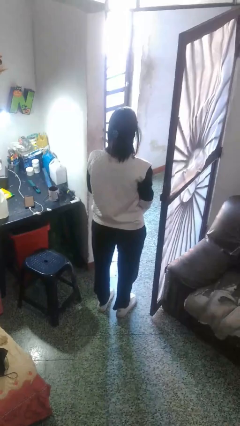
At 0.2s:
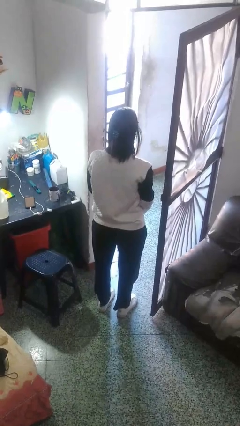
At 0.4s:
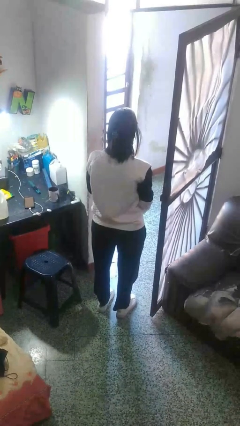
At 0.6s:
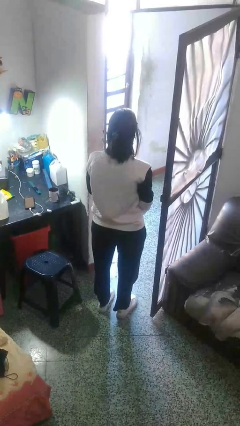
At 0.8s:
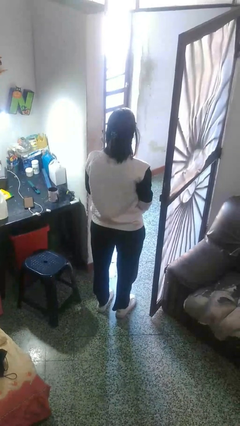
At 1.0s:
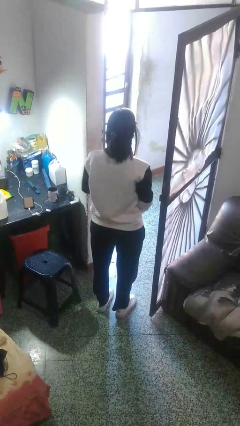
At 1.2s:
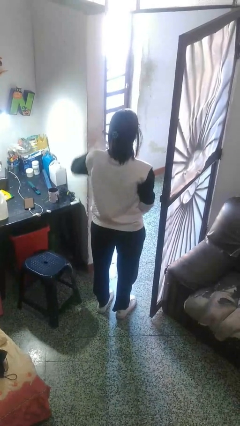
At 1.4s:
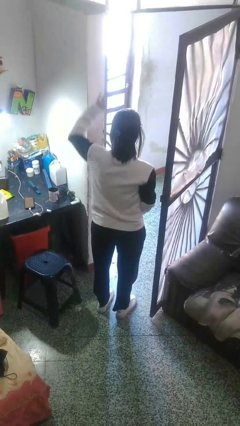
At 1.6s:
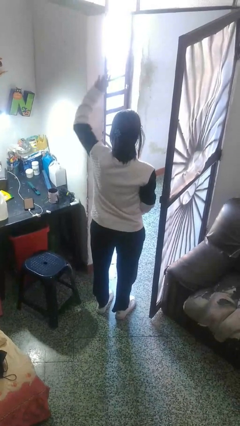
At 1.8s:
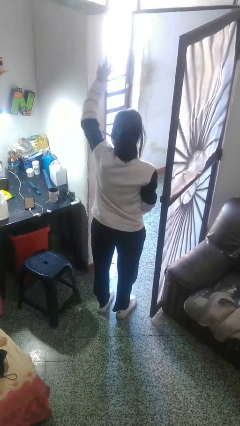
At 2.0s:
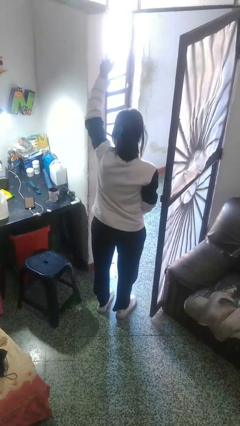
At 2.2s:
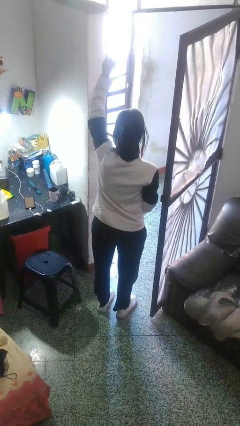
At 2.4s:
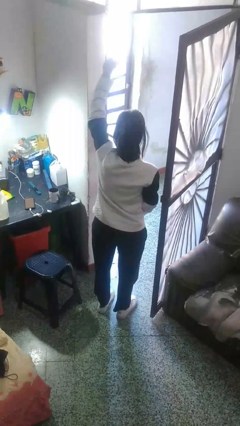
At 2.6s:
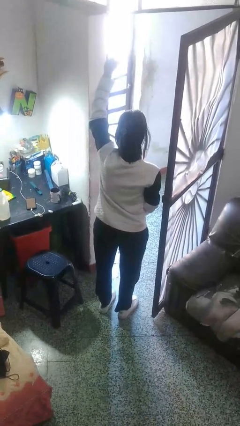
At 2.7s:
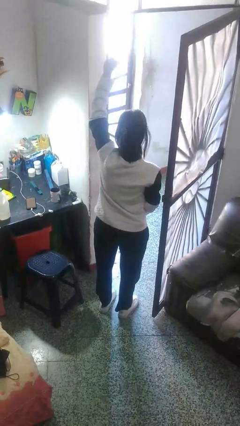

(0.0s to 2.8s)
person gestures raise hand

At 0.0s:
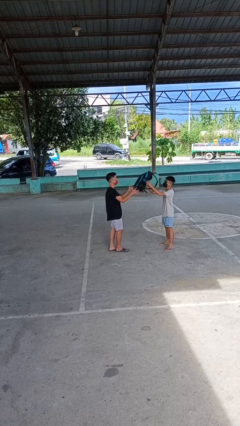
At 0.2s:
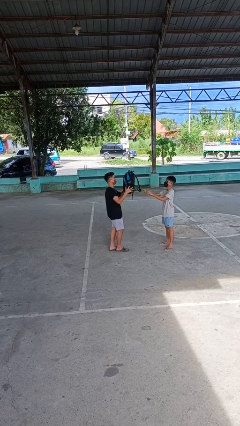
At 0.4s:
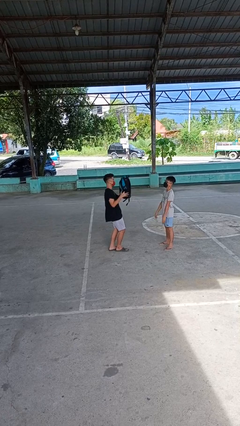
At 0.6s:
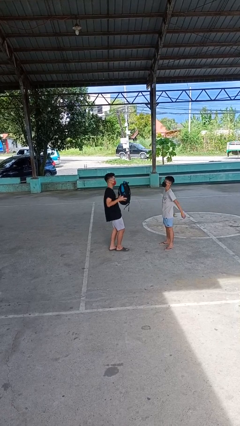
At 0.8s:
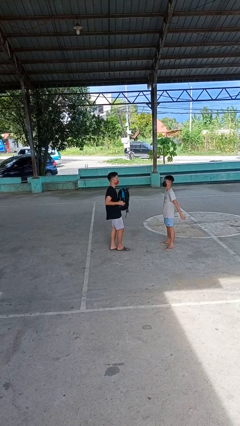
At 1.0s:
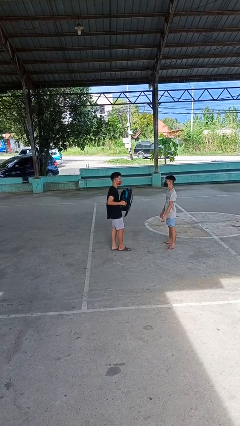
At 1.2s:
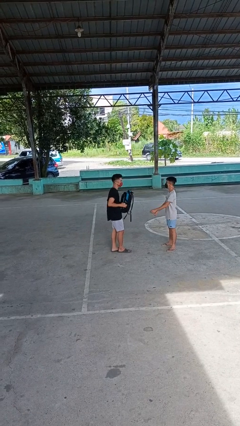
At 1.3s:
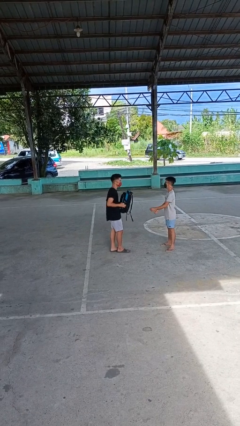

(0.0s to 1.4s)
person catches object from person

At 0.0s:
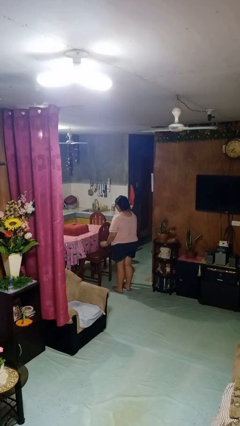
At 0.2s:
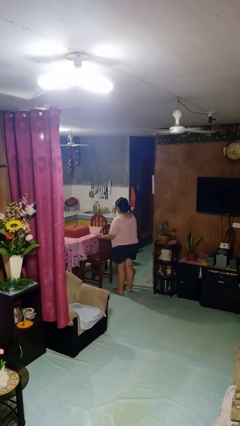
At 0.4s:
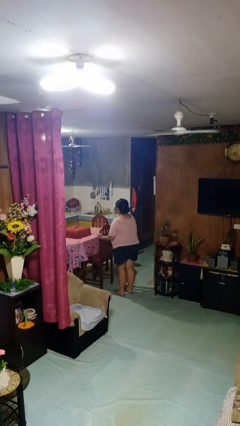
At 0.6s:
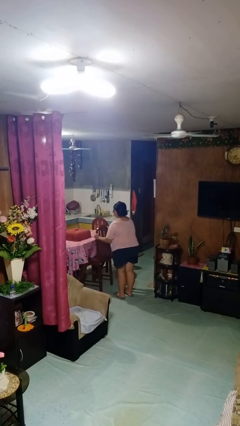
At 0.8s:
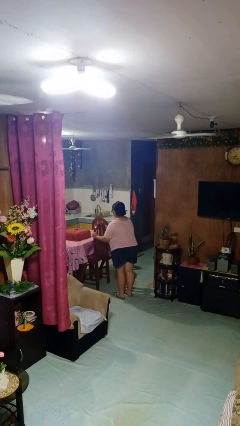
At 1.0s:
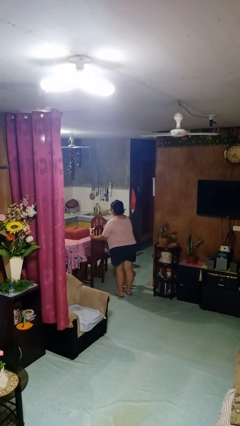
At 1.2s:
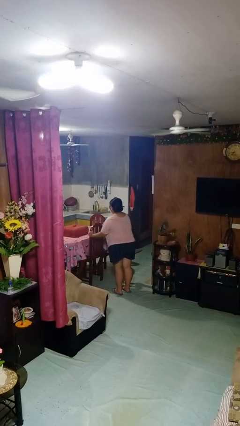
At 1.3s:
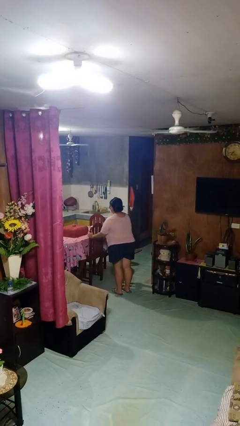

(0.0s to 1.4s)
person pushes in chair

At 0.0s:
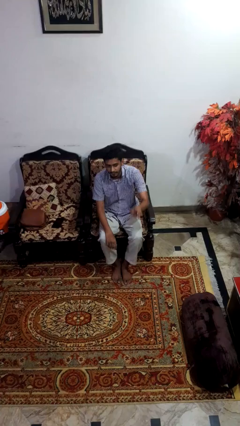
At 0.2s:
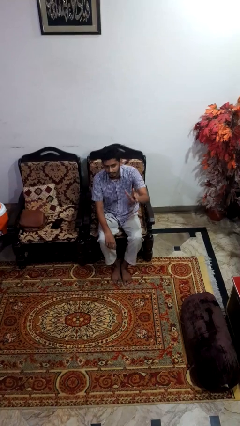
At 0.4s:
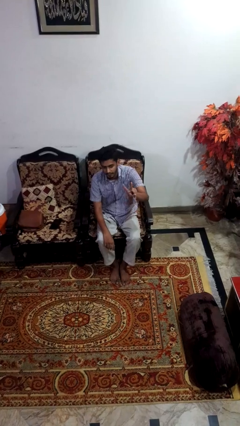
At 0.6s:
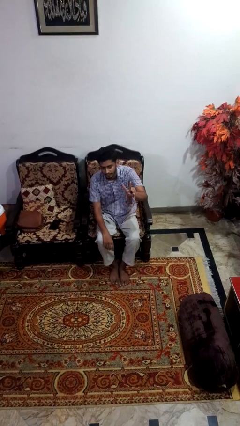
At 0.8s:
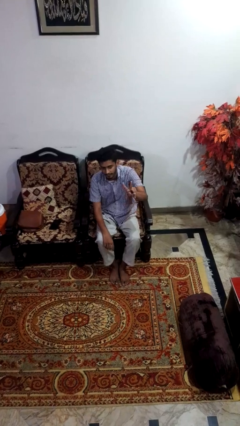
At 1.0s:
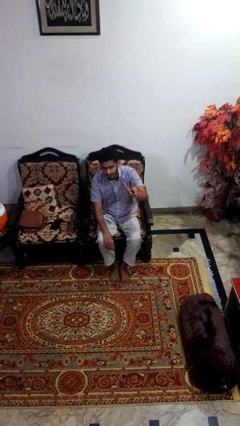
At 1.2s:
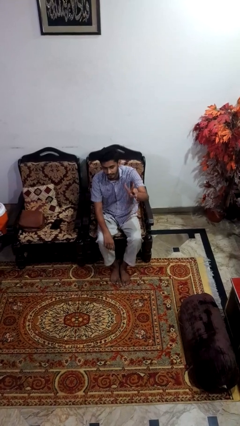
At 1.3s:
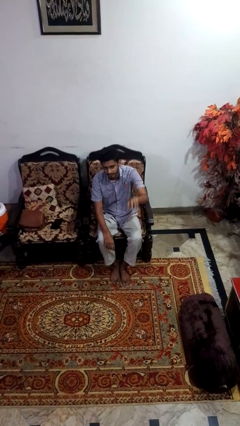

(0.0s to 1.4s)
person gestures peace

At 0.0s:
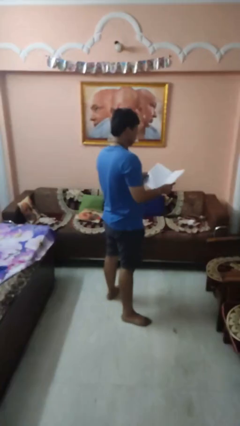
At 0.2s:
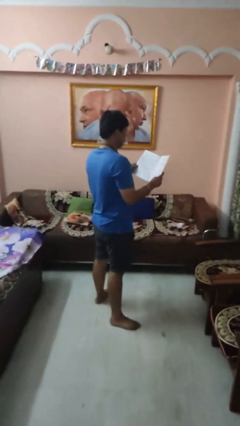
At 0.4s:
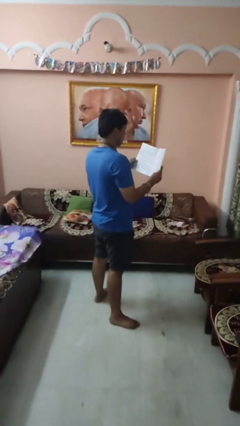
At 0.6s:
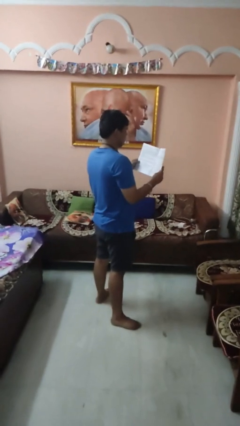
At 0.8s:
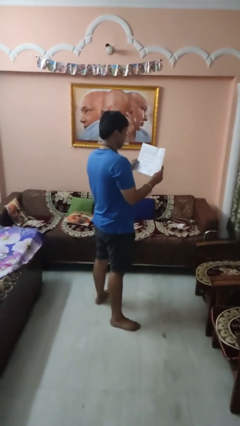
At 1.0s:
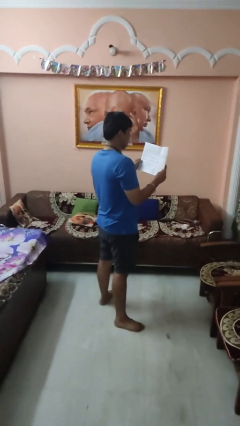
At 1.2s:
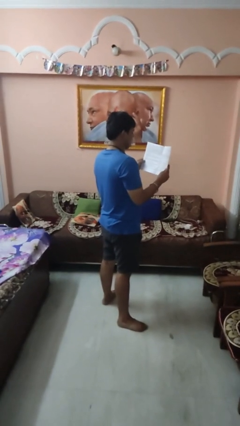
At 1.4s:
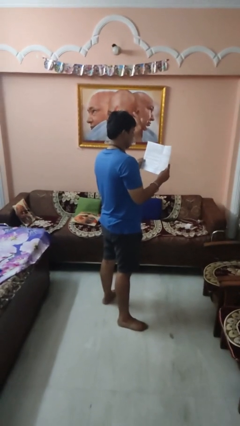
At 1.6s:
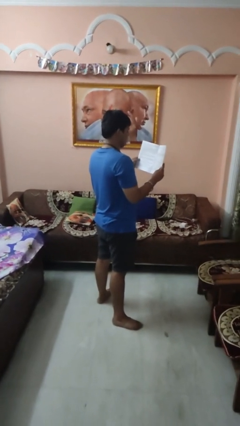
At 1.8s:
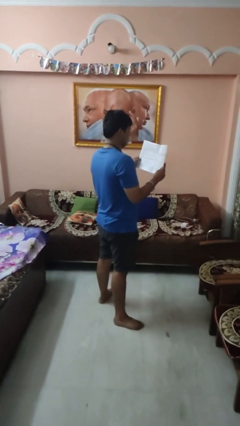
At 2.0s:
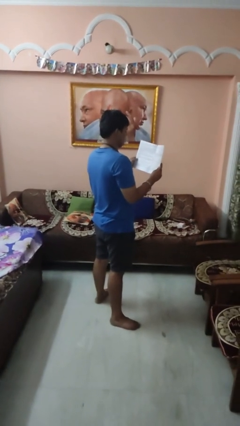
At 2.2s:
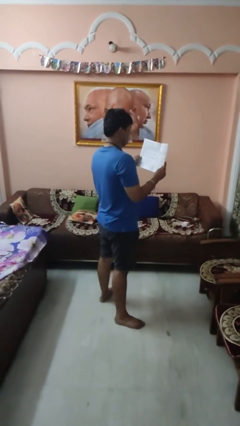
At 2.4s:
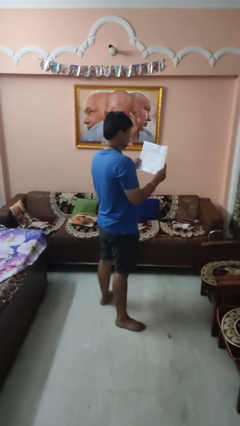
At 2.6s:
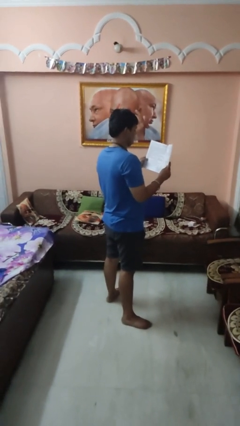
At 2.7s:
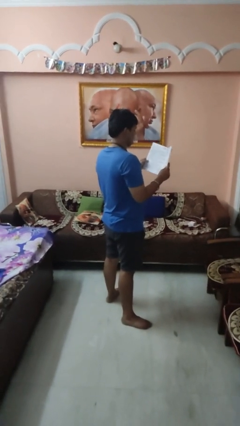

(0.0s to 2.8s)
person reads magazine

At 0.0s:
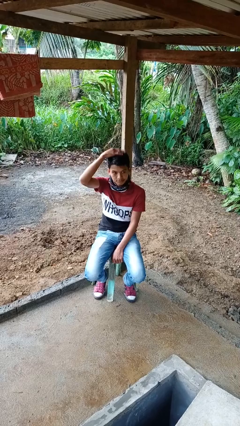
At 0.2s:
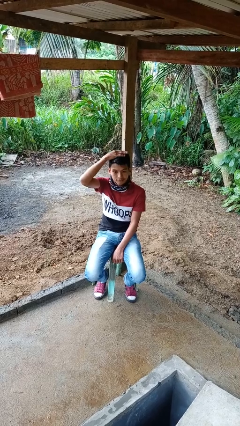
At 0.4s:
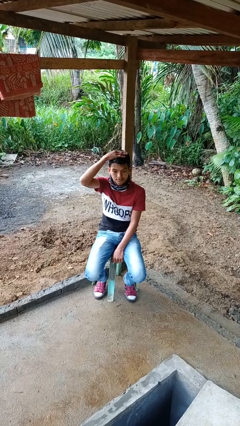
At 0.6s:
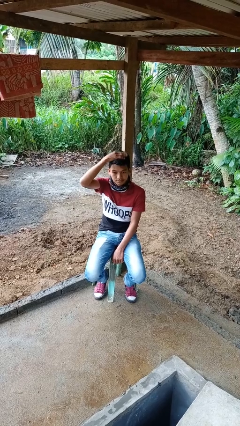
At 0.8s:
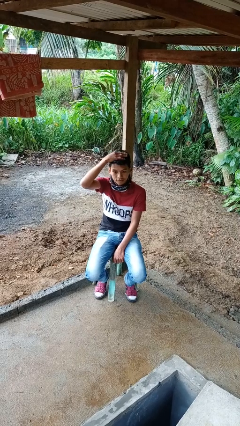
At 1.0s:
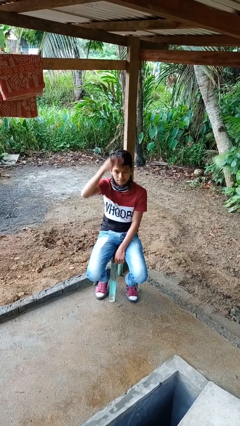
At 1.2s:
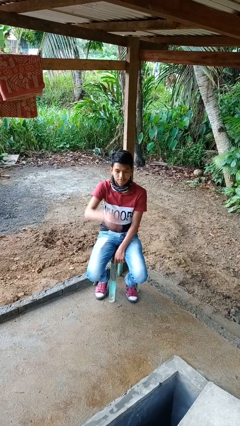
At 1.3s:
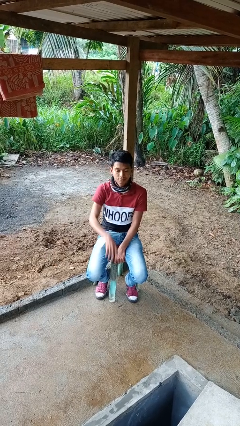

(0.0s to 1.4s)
person pats head

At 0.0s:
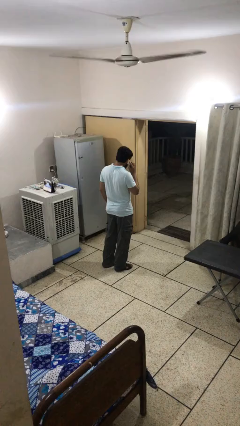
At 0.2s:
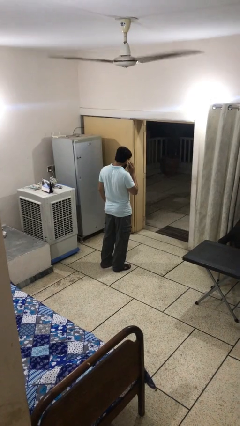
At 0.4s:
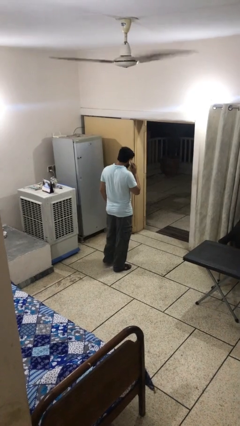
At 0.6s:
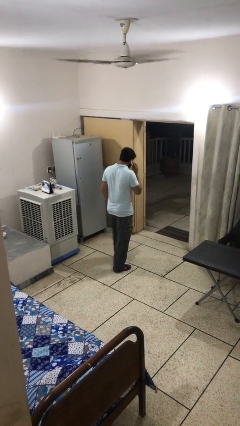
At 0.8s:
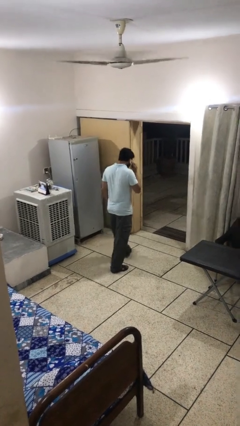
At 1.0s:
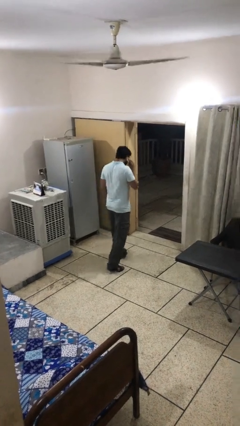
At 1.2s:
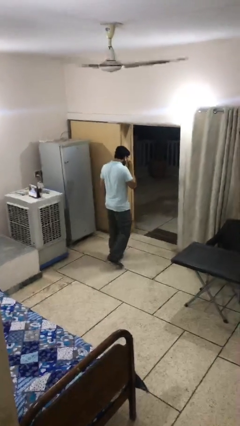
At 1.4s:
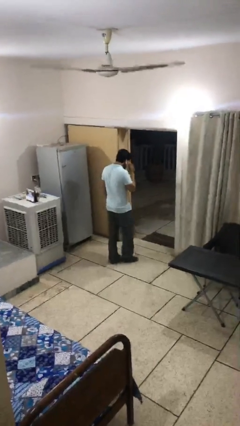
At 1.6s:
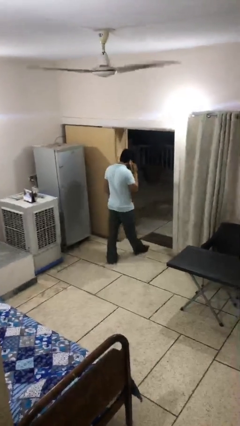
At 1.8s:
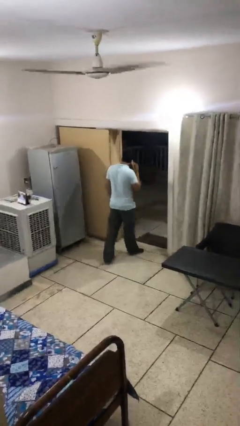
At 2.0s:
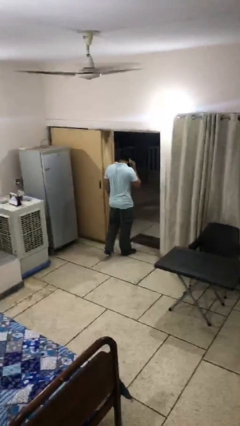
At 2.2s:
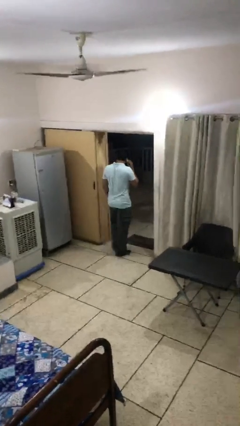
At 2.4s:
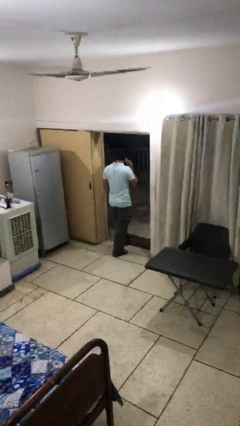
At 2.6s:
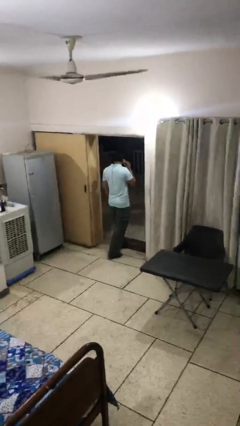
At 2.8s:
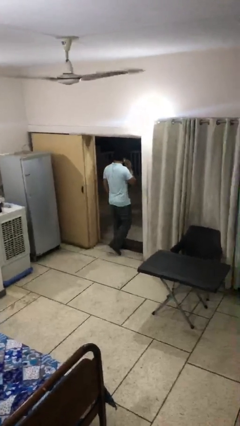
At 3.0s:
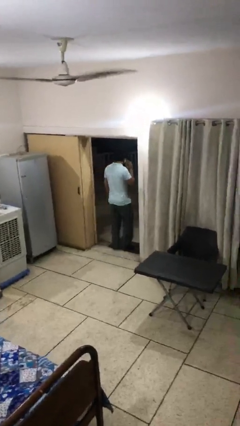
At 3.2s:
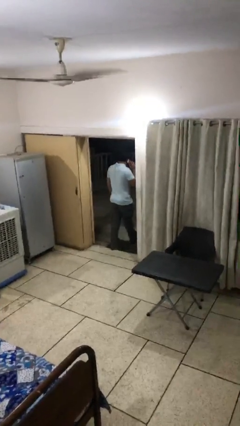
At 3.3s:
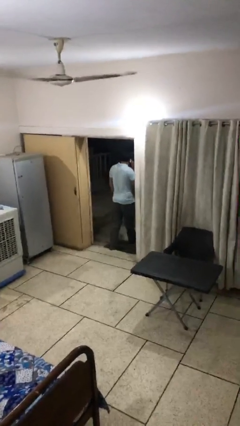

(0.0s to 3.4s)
person exits scene through structure

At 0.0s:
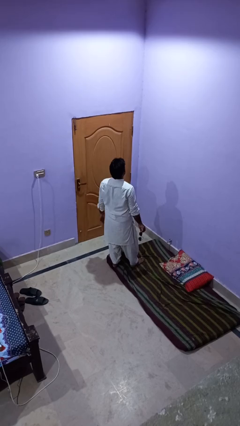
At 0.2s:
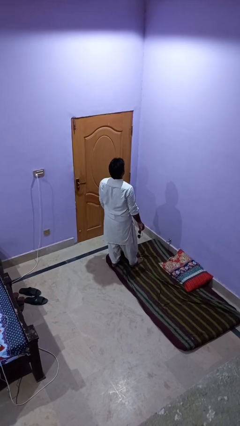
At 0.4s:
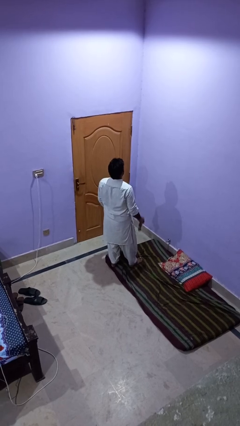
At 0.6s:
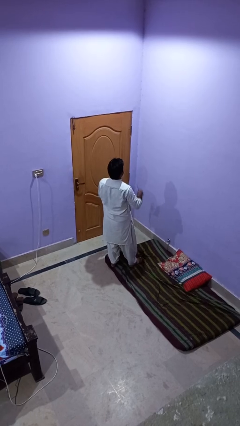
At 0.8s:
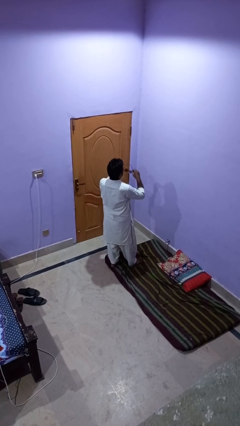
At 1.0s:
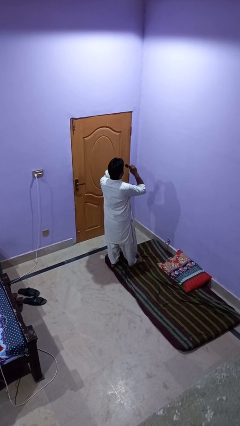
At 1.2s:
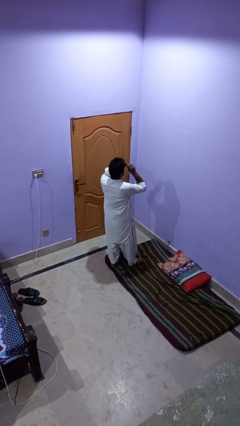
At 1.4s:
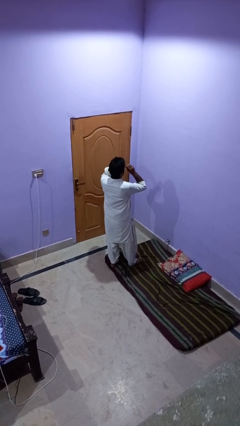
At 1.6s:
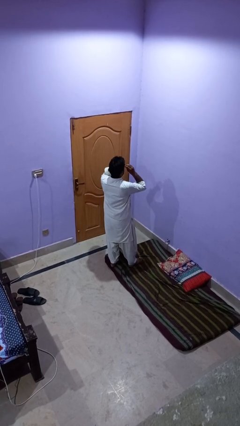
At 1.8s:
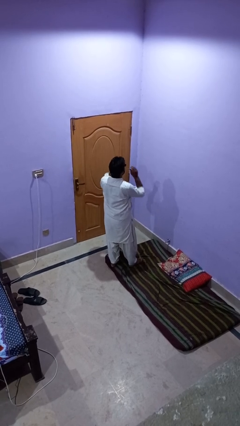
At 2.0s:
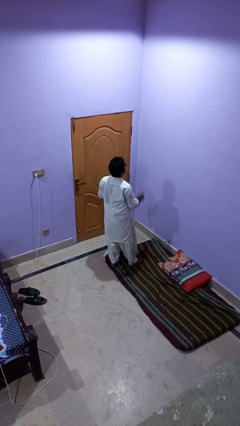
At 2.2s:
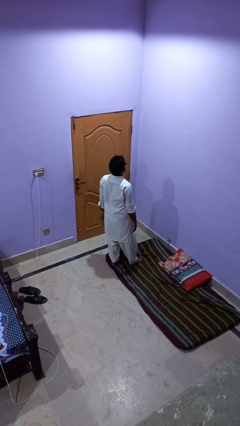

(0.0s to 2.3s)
person puts on sunglasses
